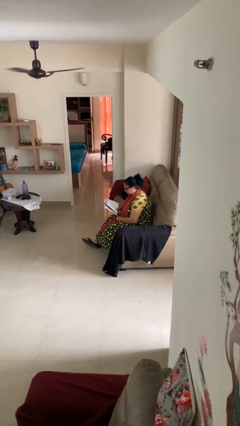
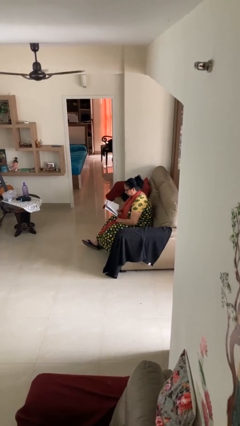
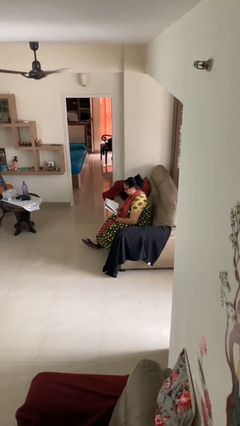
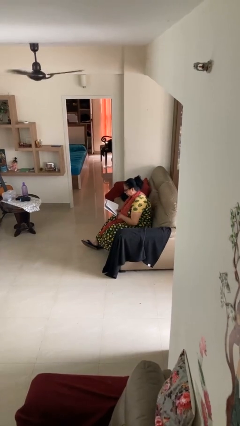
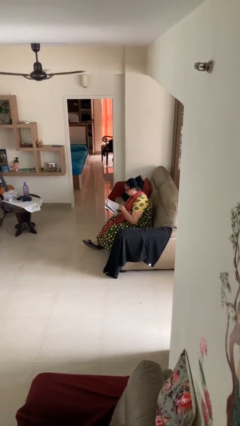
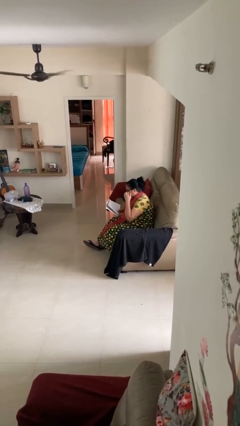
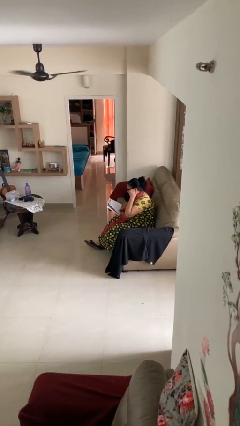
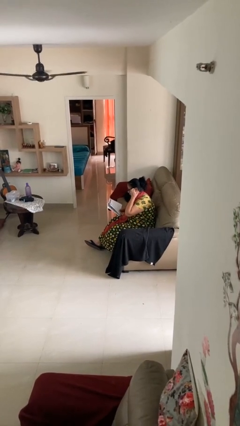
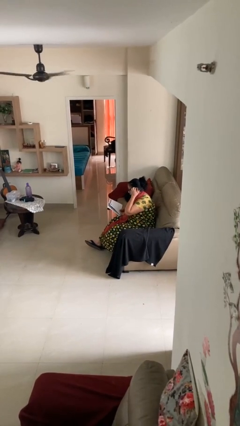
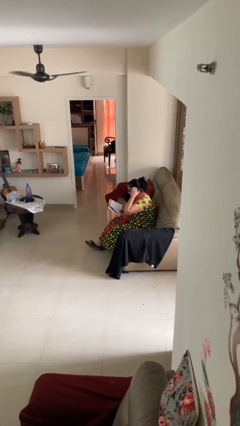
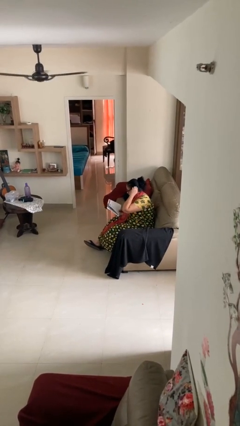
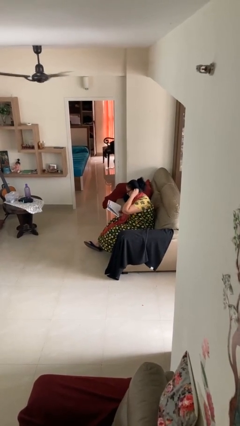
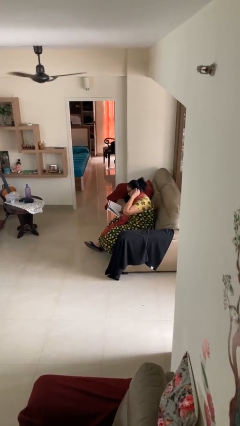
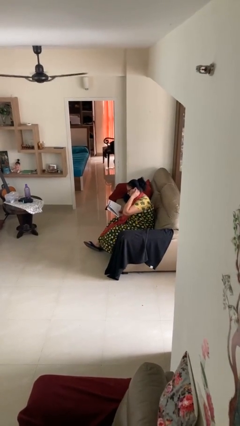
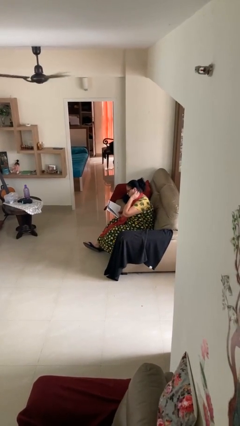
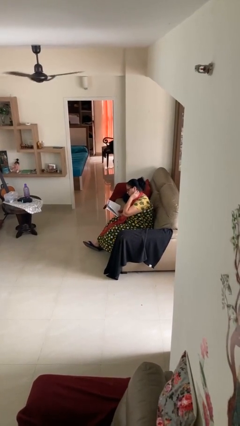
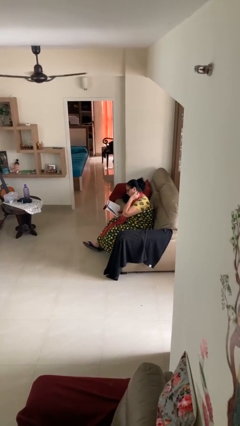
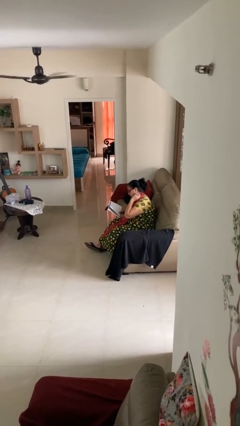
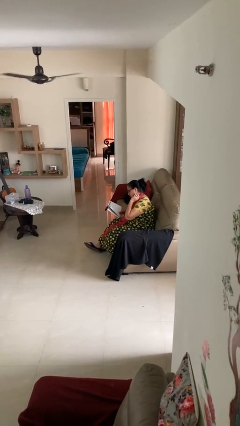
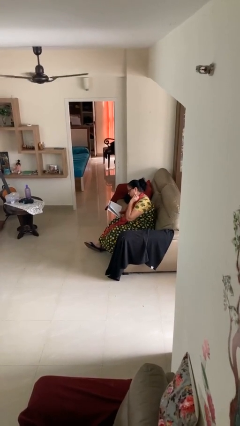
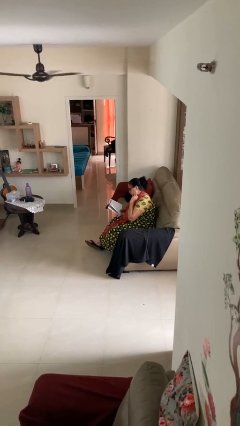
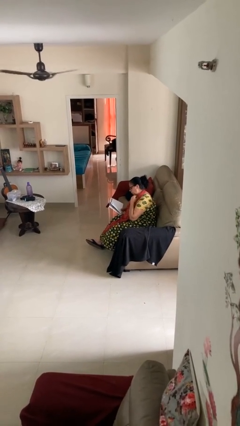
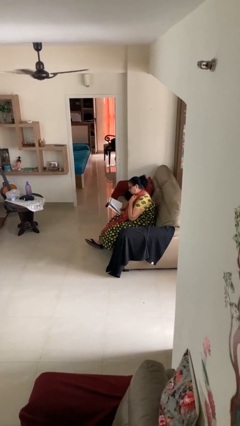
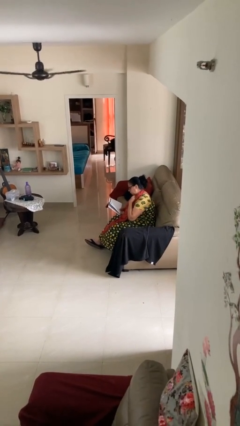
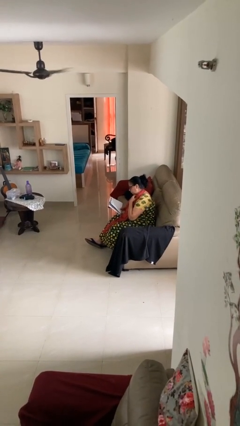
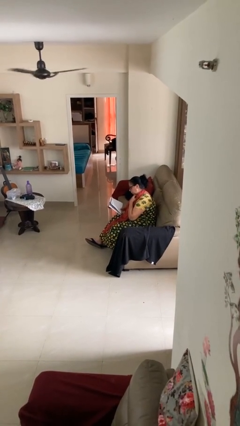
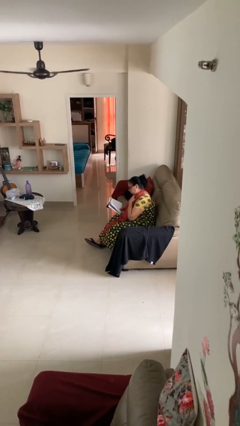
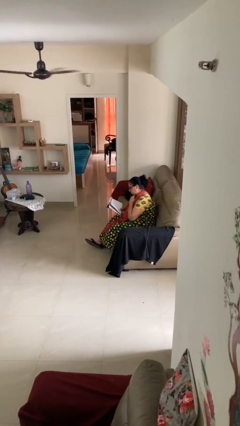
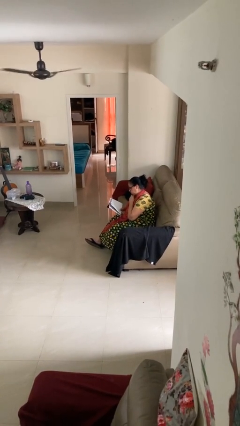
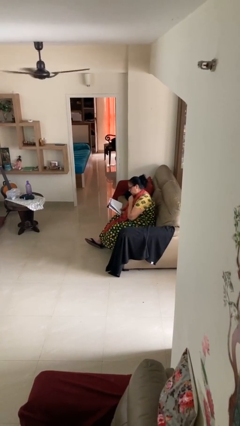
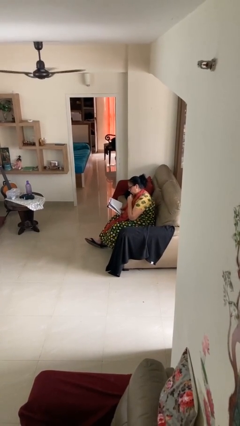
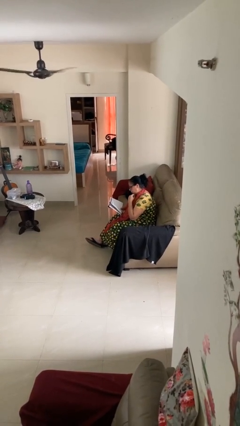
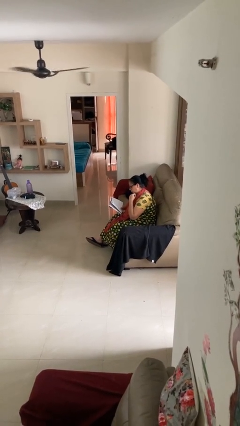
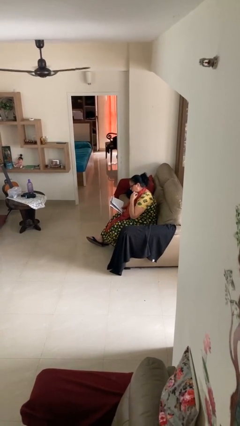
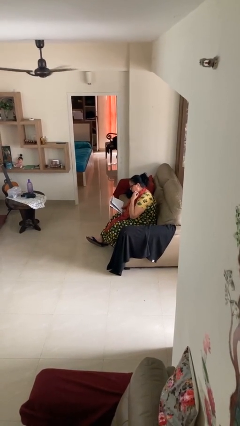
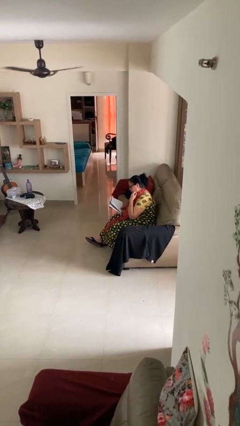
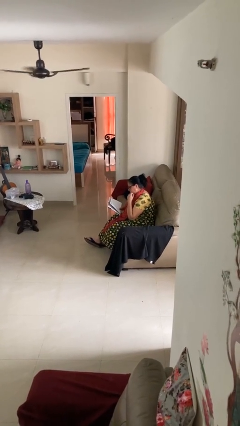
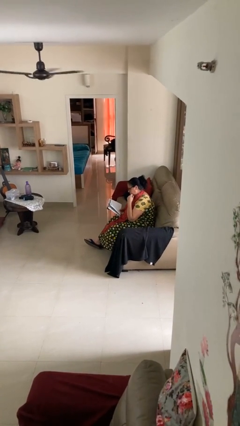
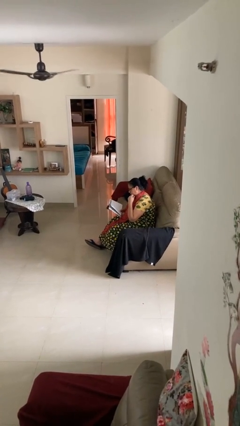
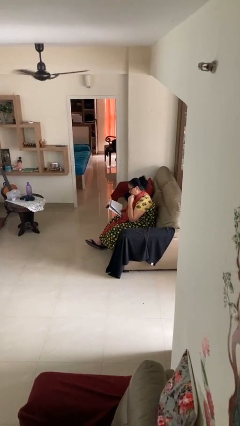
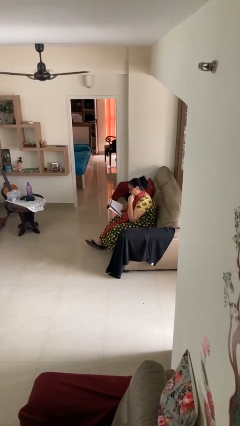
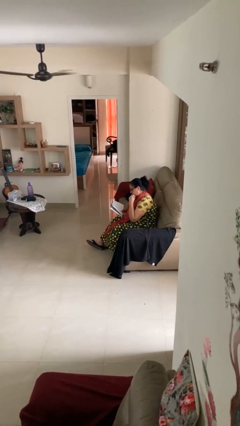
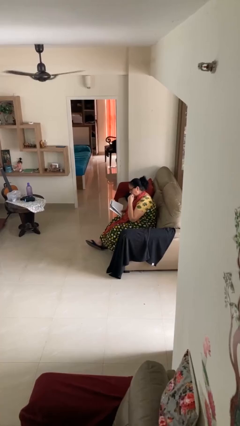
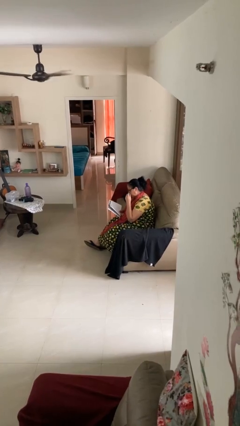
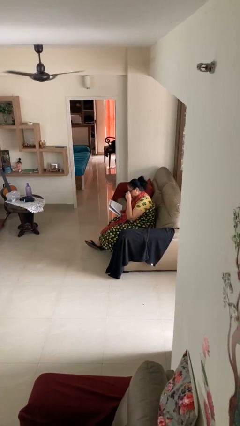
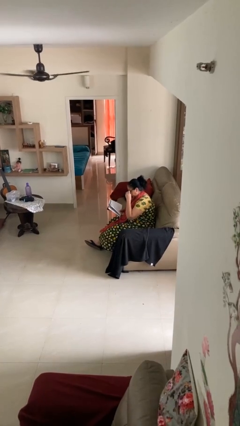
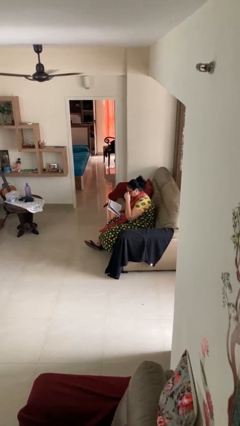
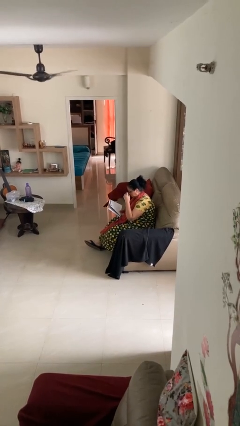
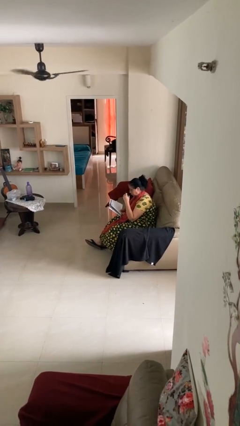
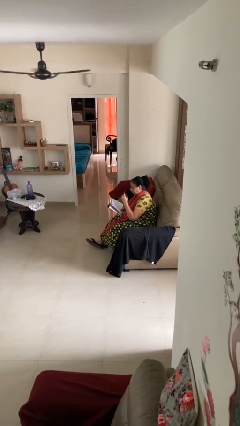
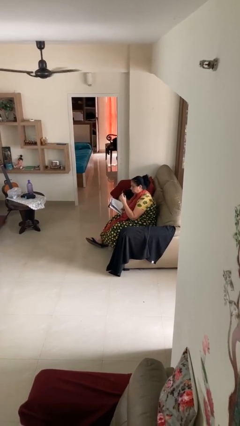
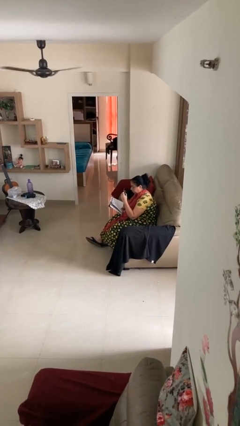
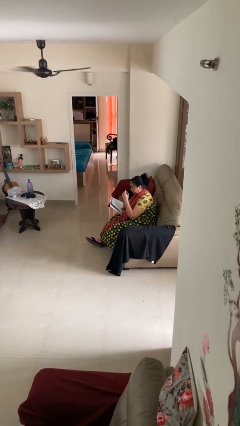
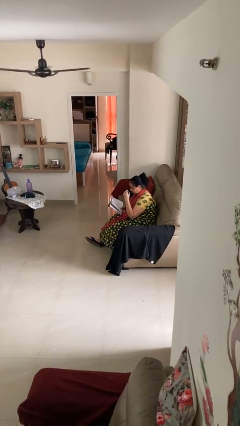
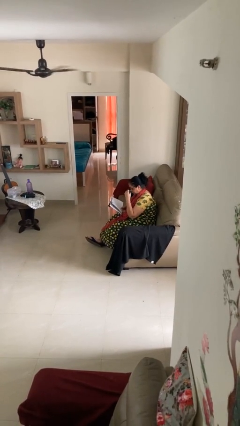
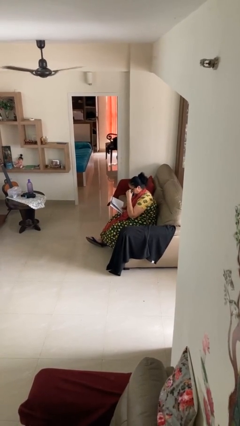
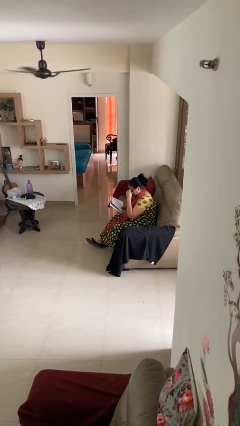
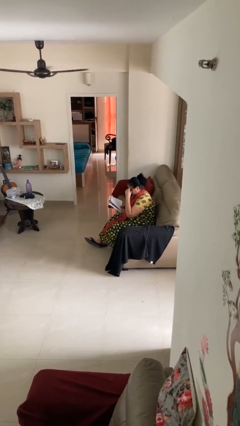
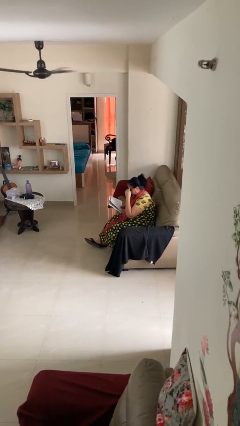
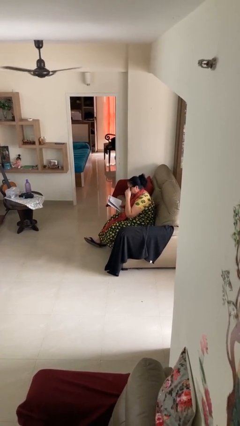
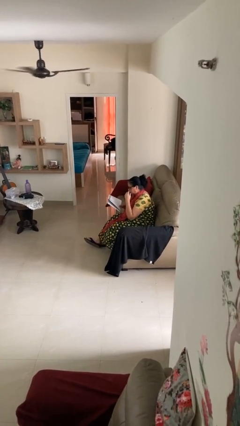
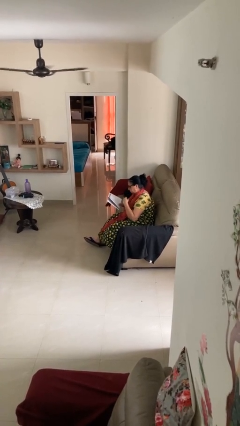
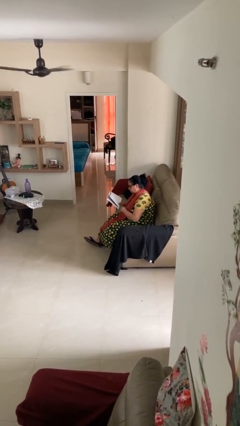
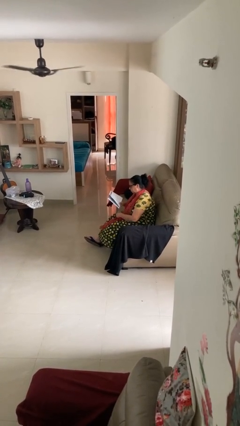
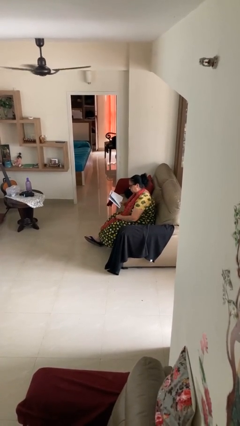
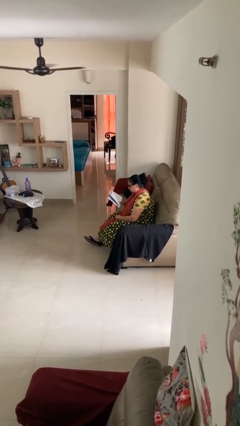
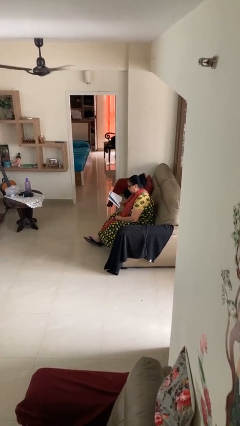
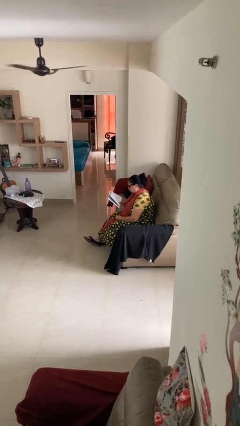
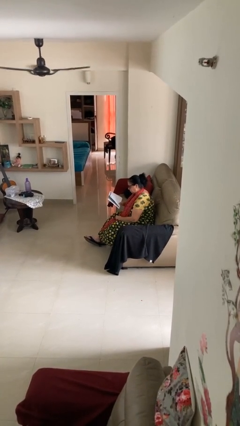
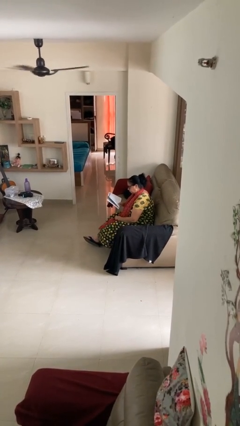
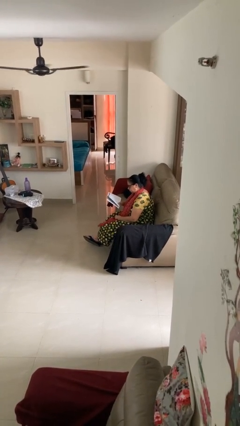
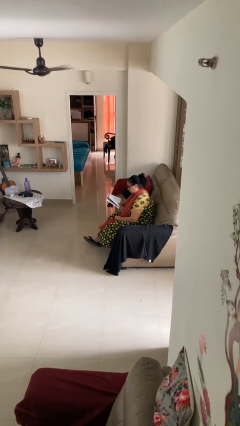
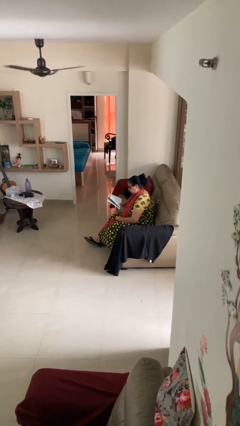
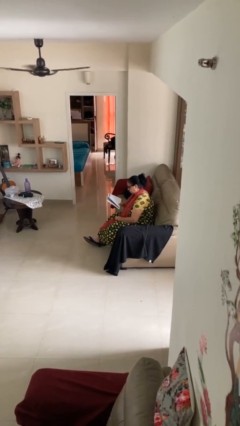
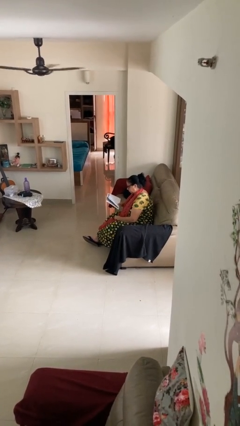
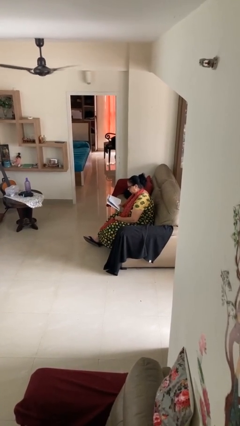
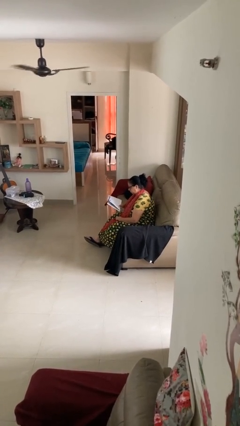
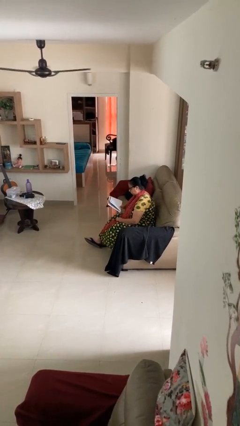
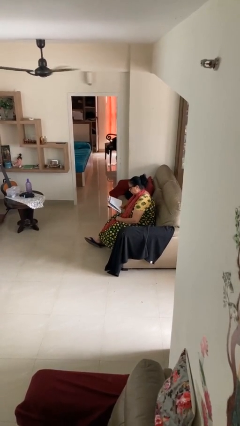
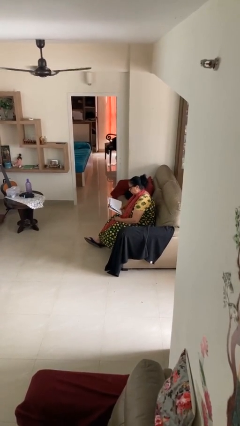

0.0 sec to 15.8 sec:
person reads document

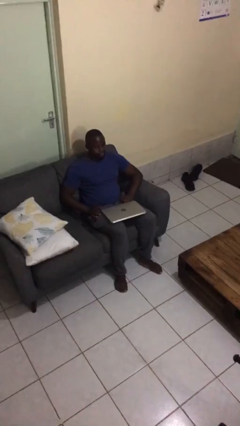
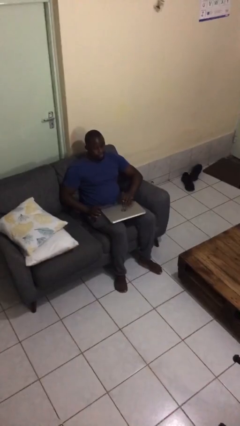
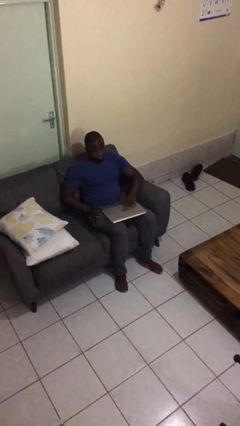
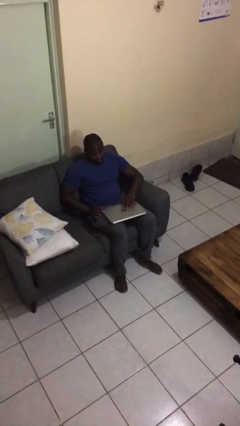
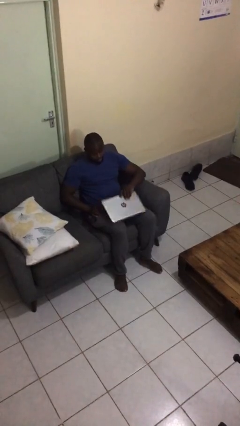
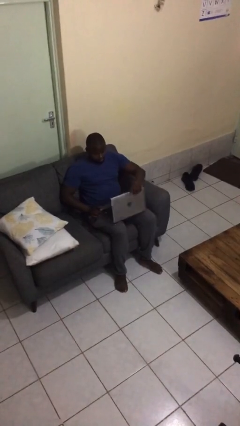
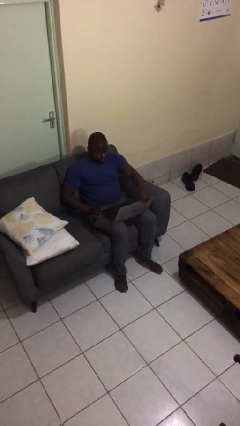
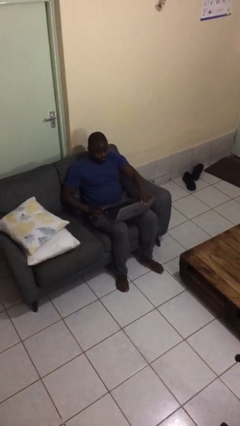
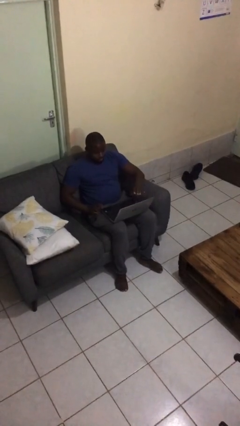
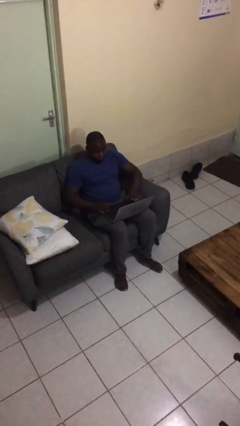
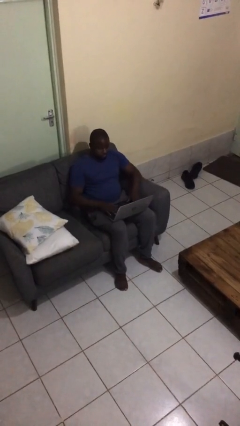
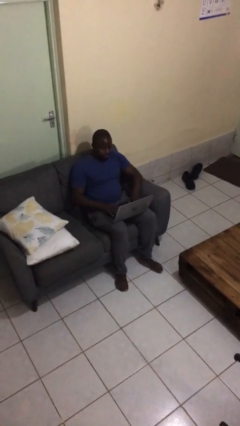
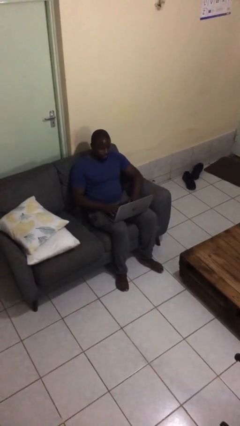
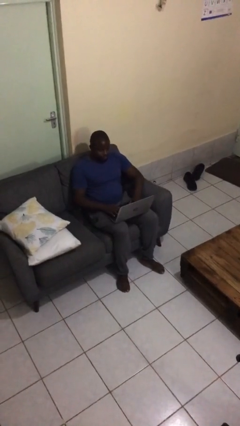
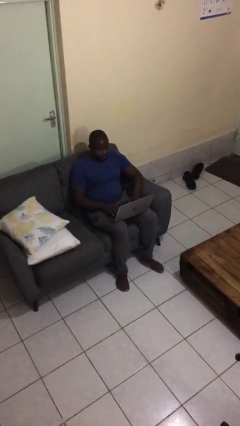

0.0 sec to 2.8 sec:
person opens laptop
